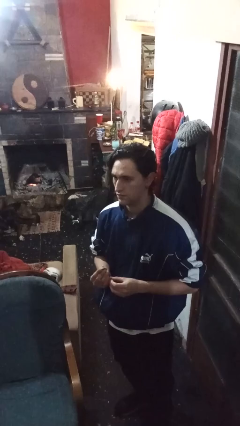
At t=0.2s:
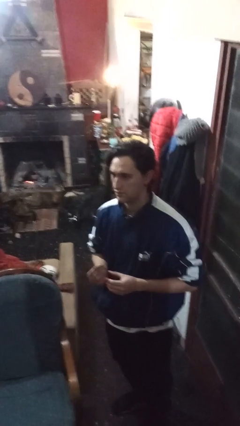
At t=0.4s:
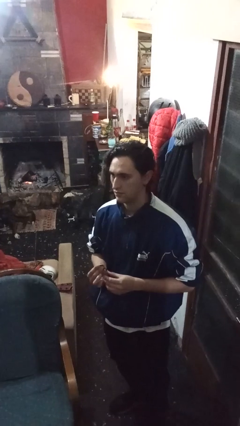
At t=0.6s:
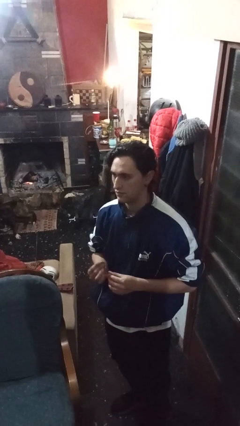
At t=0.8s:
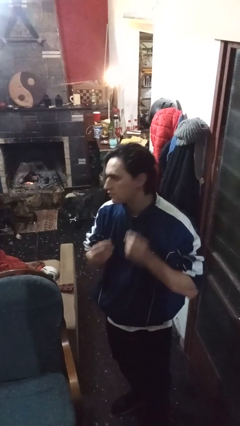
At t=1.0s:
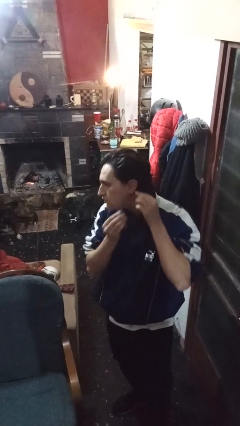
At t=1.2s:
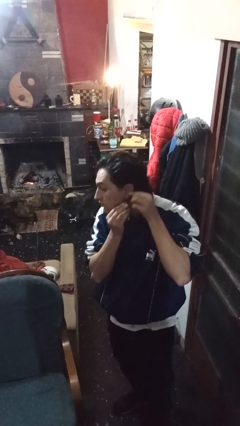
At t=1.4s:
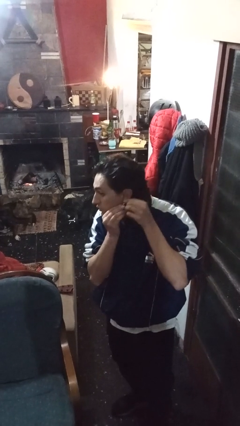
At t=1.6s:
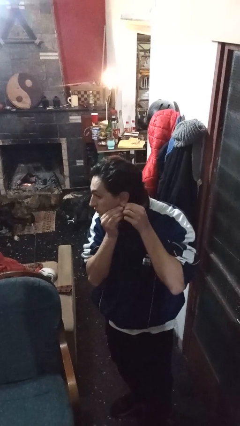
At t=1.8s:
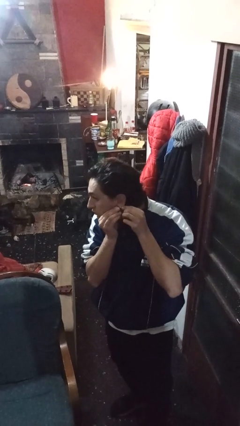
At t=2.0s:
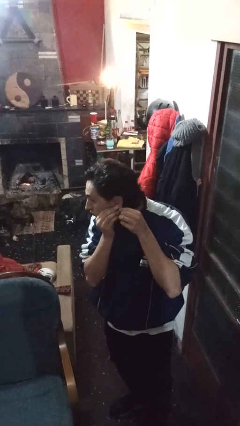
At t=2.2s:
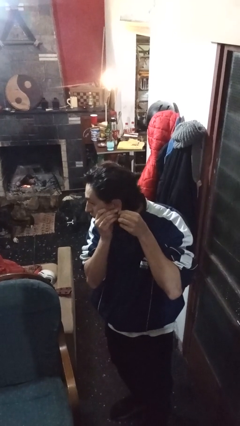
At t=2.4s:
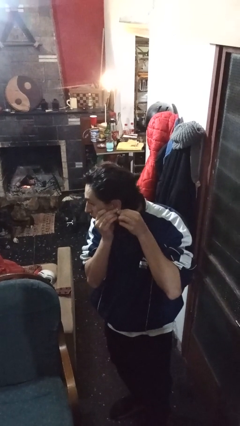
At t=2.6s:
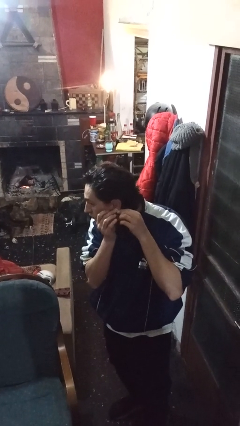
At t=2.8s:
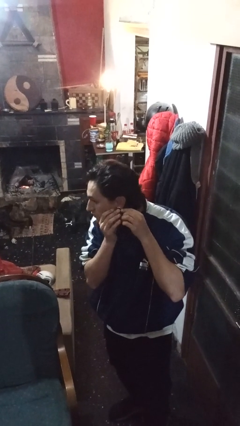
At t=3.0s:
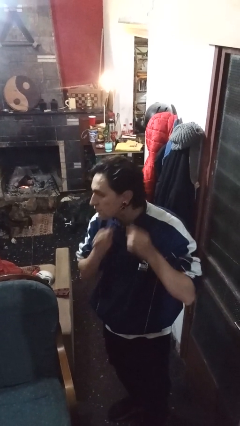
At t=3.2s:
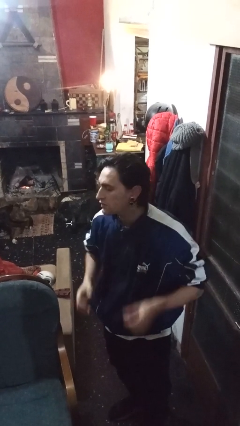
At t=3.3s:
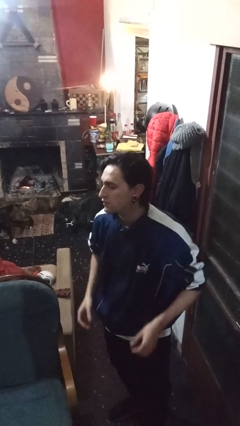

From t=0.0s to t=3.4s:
person puts on earrings

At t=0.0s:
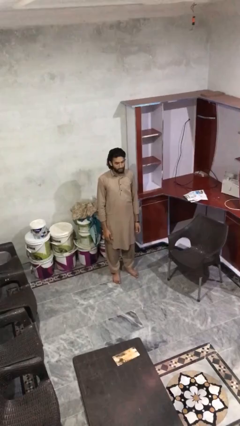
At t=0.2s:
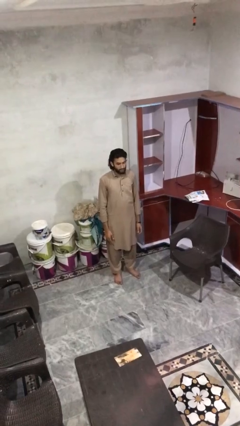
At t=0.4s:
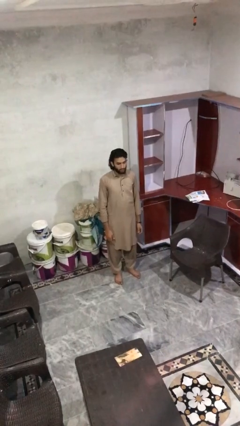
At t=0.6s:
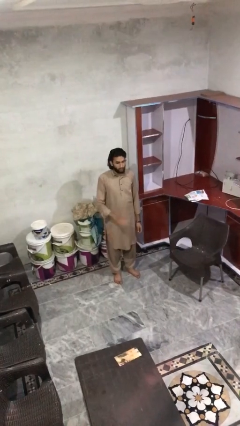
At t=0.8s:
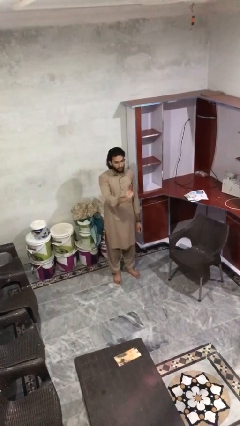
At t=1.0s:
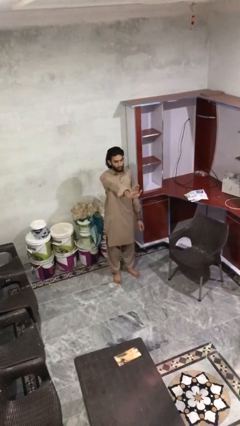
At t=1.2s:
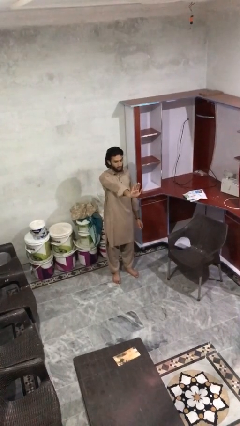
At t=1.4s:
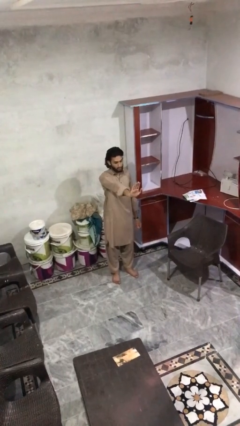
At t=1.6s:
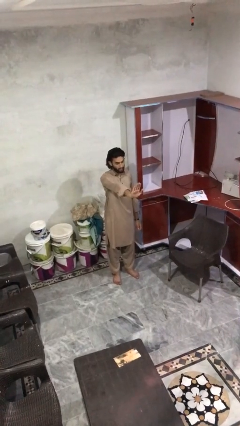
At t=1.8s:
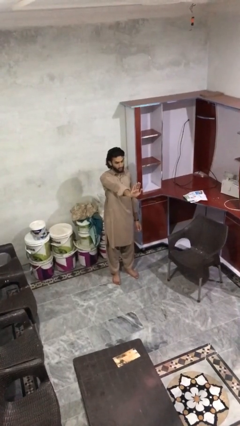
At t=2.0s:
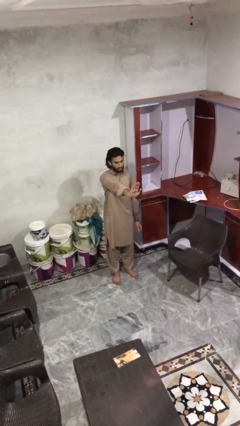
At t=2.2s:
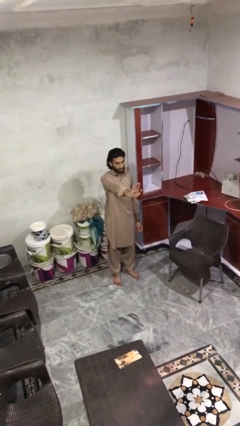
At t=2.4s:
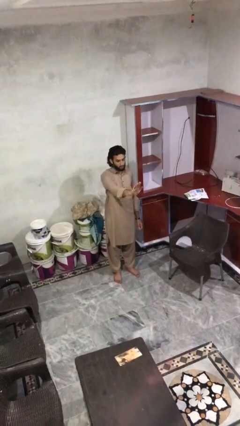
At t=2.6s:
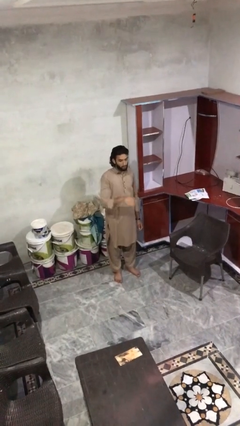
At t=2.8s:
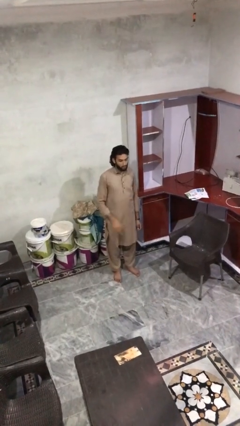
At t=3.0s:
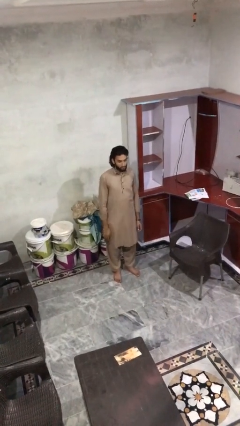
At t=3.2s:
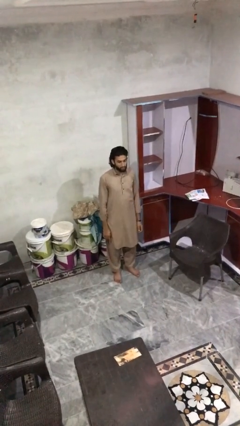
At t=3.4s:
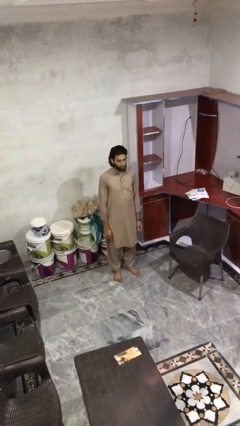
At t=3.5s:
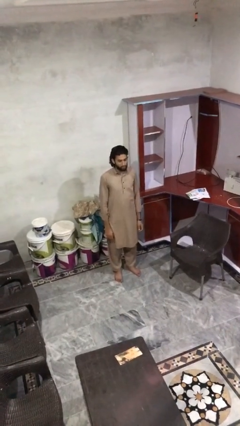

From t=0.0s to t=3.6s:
person gestures stop

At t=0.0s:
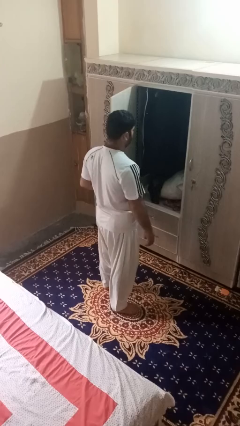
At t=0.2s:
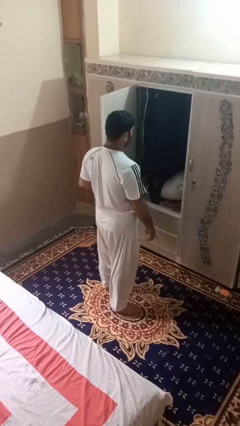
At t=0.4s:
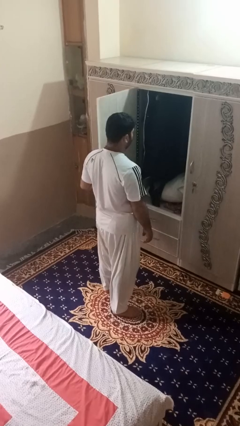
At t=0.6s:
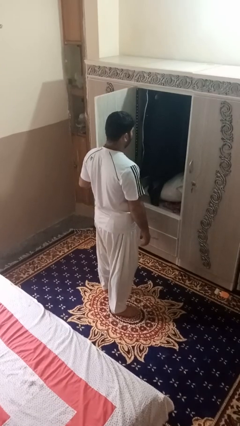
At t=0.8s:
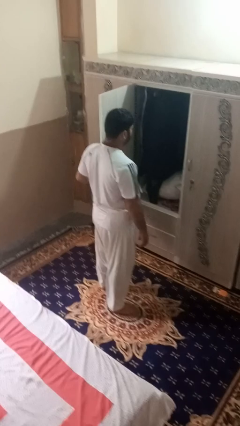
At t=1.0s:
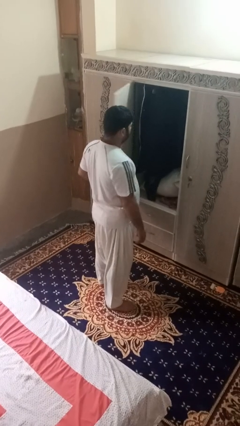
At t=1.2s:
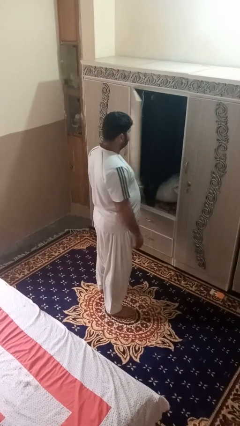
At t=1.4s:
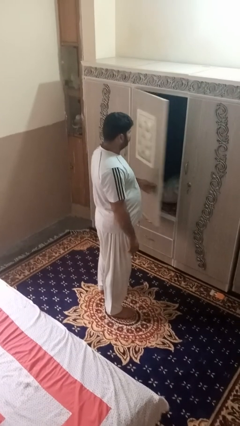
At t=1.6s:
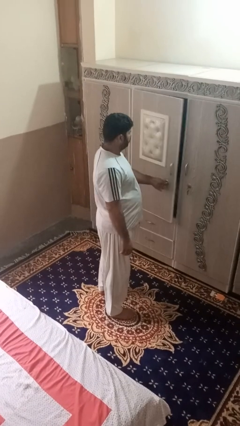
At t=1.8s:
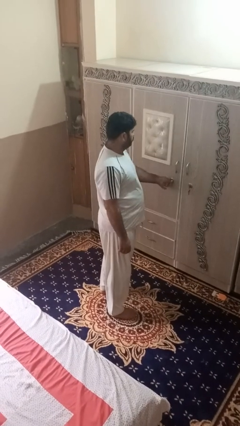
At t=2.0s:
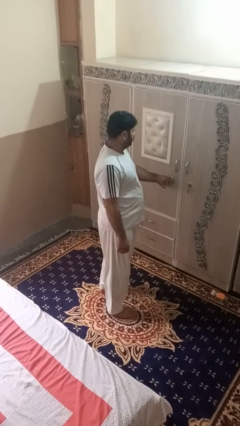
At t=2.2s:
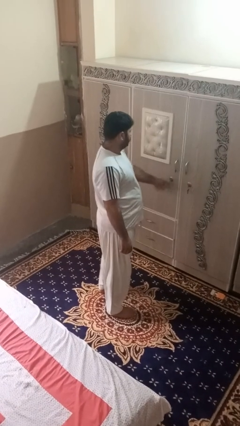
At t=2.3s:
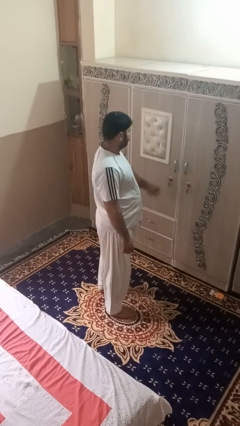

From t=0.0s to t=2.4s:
person closes dresser drawer

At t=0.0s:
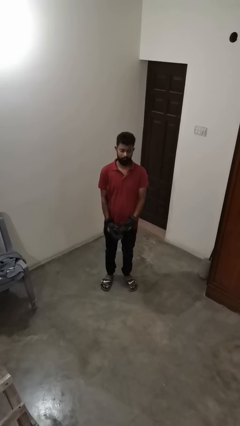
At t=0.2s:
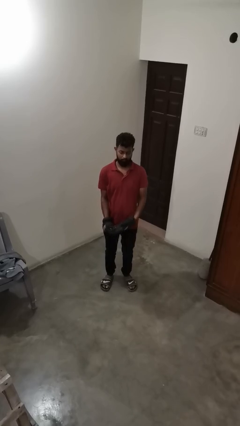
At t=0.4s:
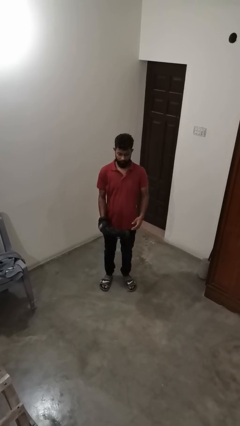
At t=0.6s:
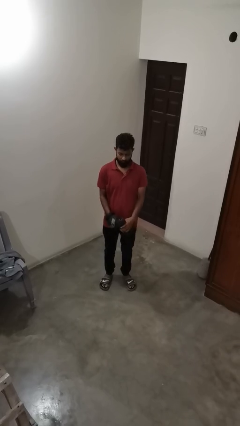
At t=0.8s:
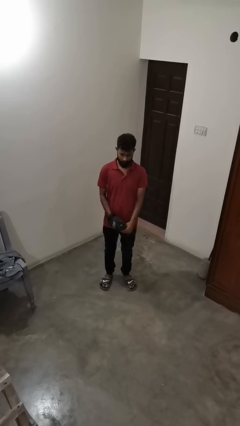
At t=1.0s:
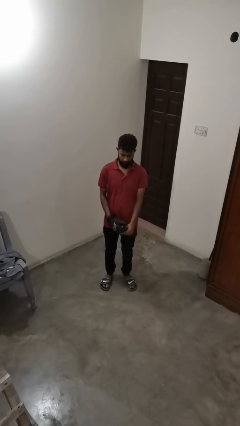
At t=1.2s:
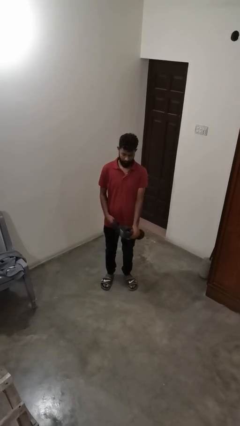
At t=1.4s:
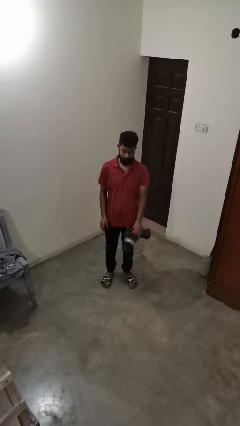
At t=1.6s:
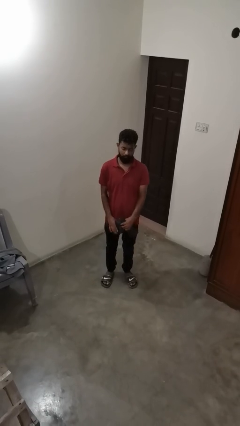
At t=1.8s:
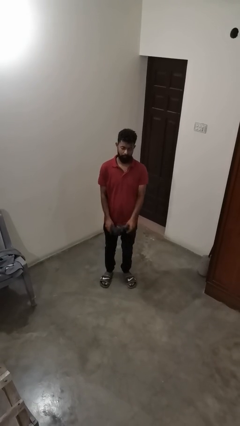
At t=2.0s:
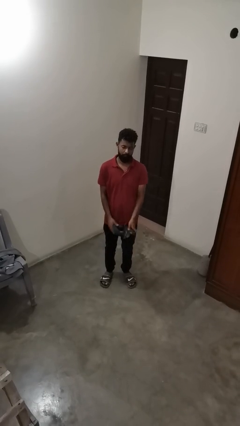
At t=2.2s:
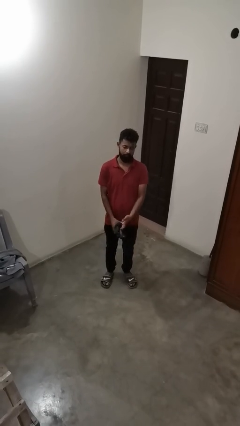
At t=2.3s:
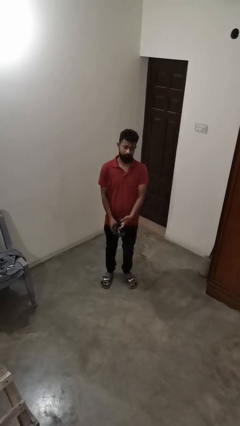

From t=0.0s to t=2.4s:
person takes off gloves

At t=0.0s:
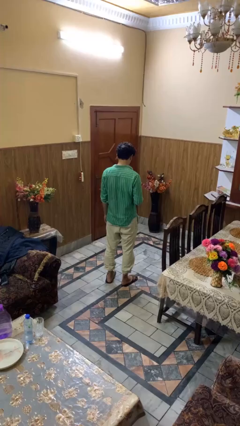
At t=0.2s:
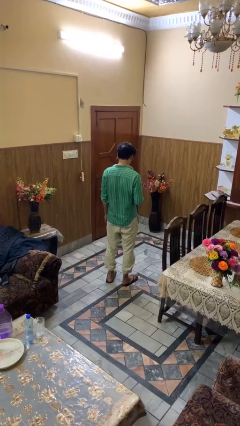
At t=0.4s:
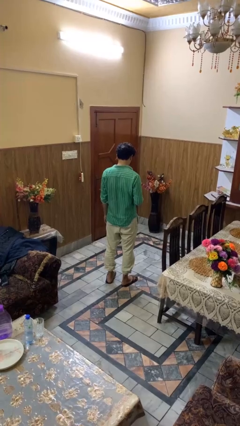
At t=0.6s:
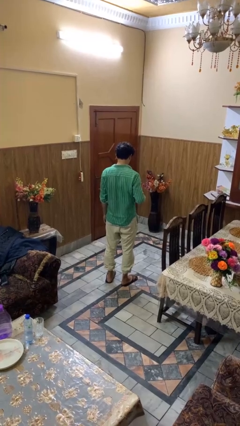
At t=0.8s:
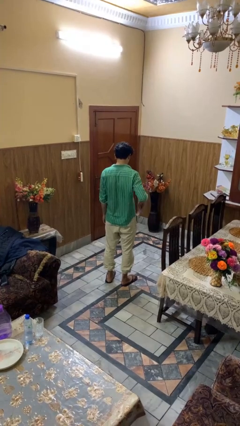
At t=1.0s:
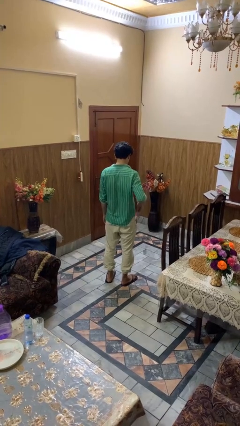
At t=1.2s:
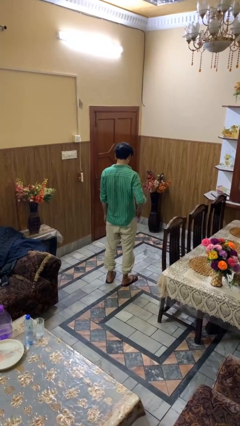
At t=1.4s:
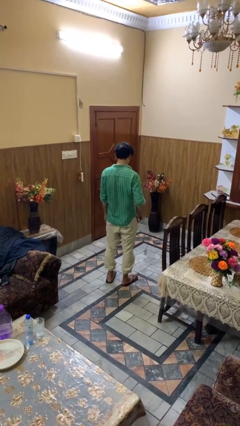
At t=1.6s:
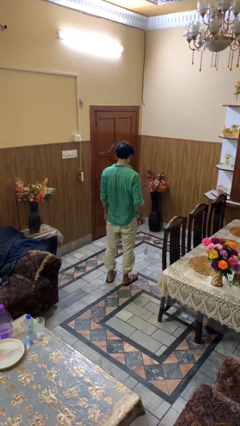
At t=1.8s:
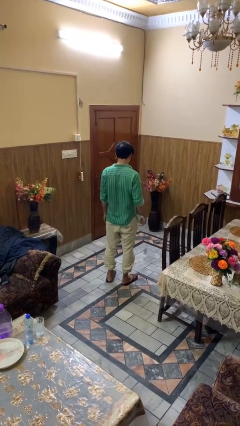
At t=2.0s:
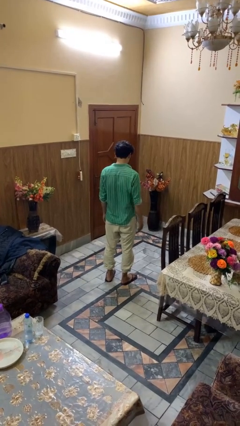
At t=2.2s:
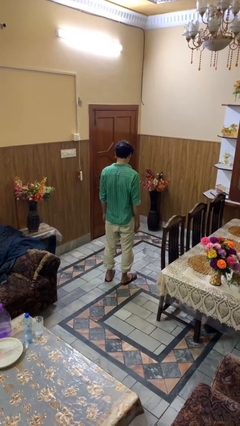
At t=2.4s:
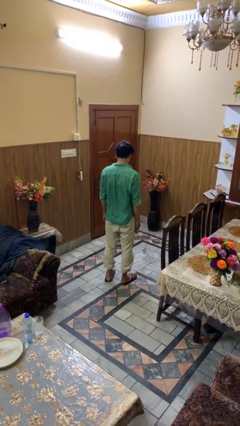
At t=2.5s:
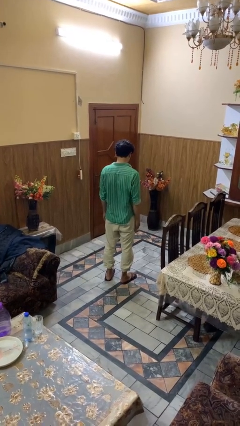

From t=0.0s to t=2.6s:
person puts phone into pocket

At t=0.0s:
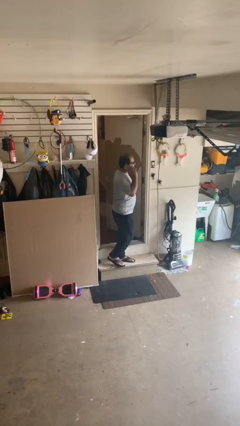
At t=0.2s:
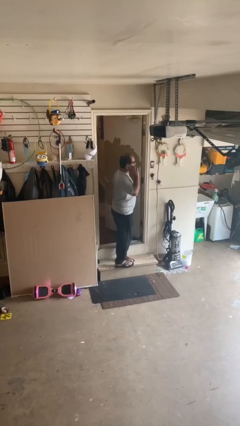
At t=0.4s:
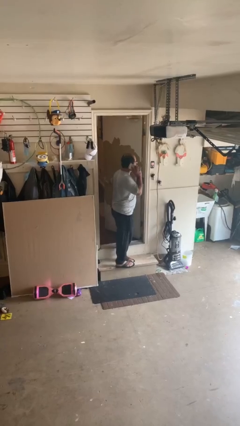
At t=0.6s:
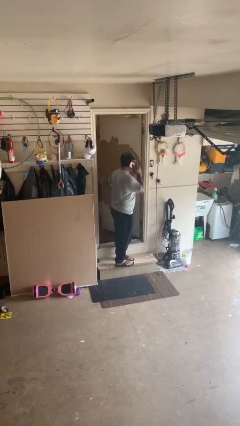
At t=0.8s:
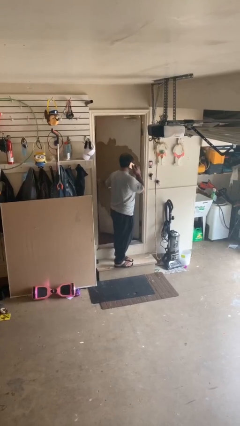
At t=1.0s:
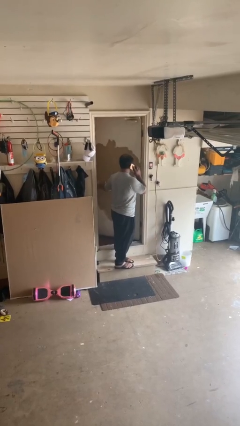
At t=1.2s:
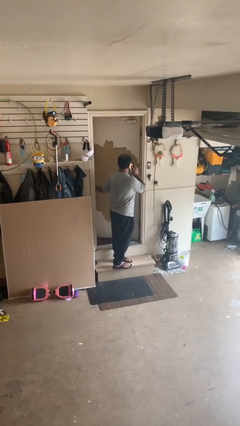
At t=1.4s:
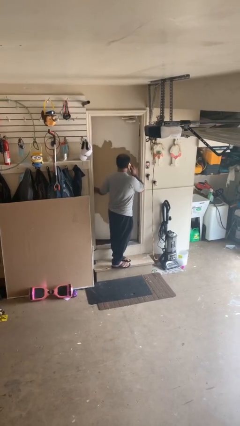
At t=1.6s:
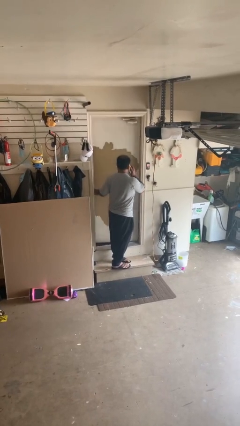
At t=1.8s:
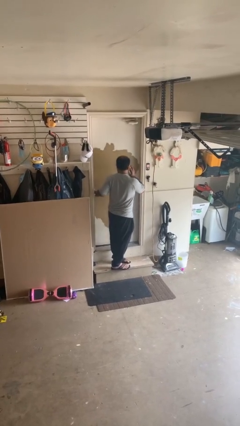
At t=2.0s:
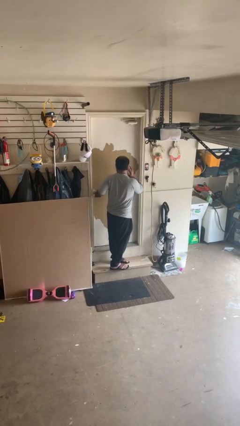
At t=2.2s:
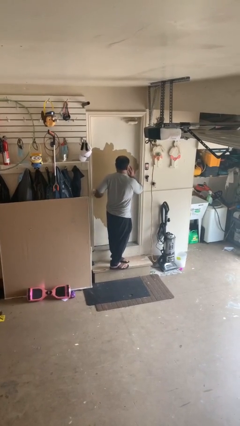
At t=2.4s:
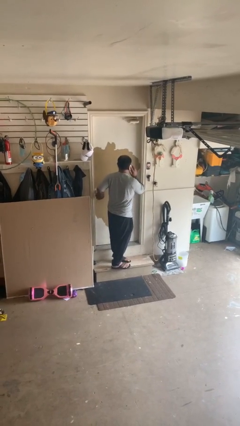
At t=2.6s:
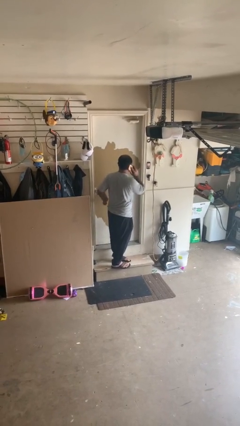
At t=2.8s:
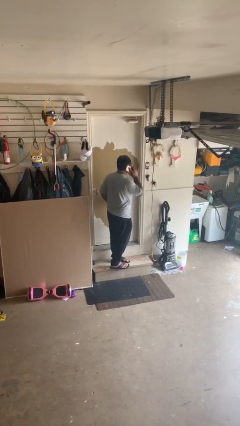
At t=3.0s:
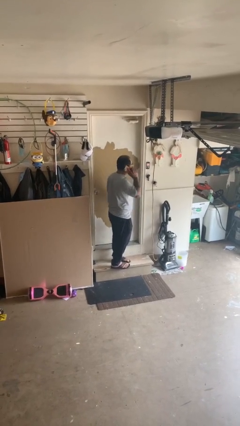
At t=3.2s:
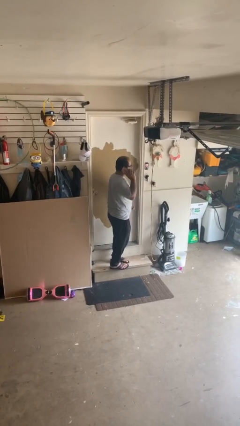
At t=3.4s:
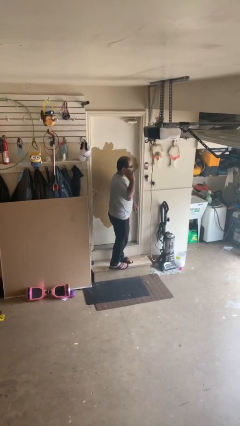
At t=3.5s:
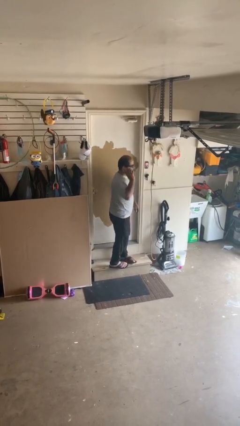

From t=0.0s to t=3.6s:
person closes facility door
